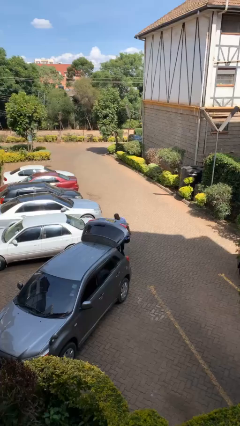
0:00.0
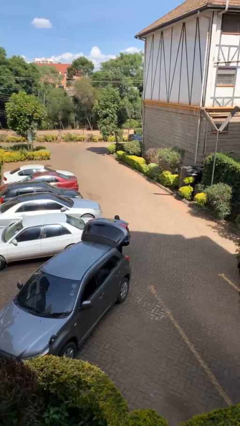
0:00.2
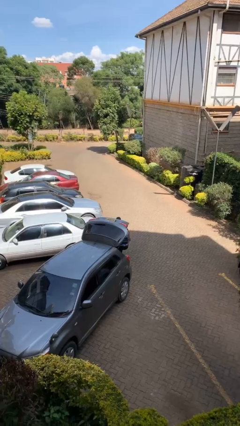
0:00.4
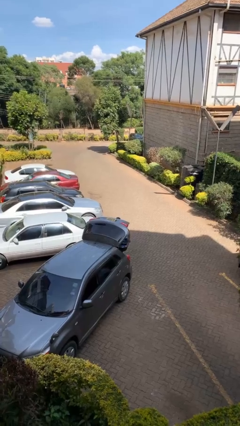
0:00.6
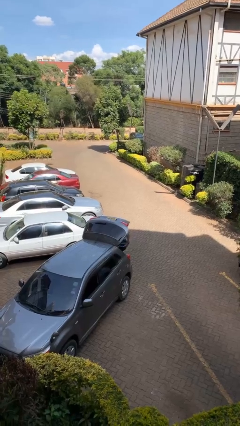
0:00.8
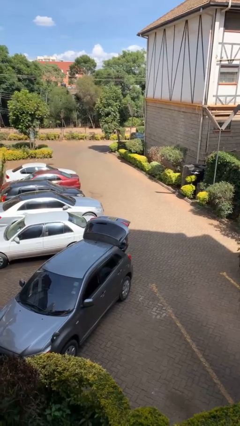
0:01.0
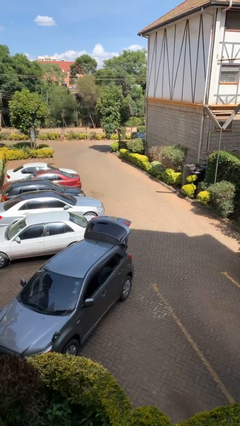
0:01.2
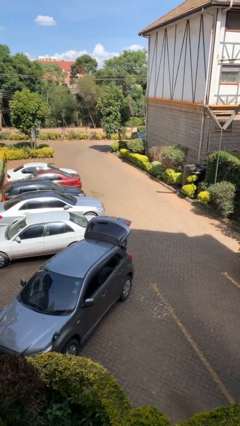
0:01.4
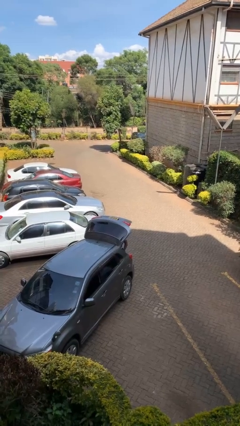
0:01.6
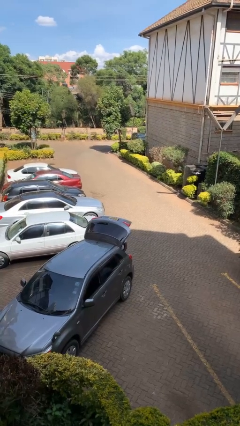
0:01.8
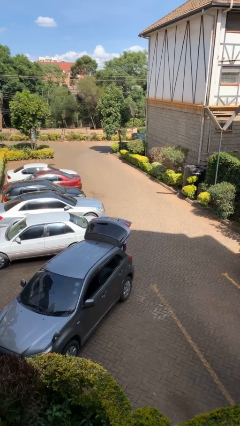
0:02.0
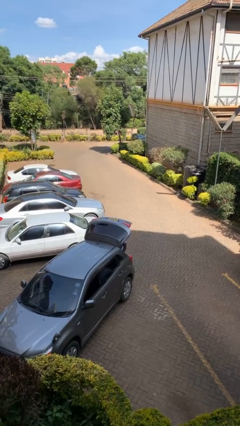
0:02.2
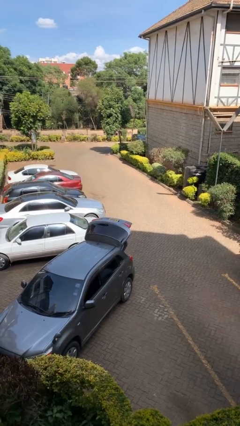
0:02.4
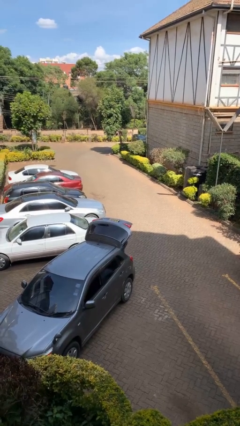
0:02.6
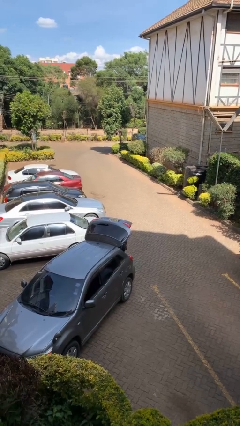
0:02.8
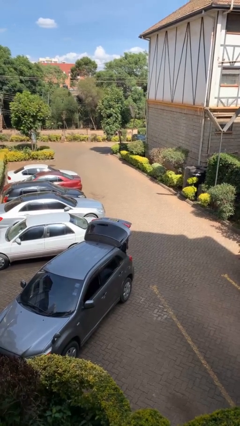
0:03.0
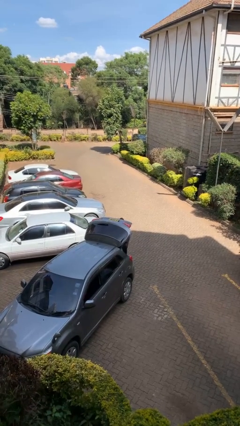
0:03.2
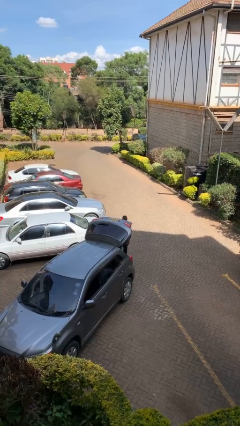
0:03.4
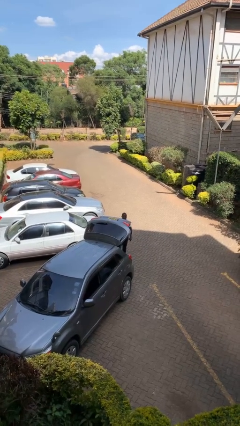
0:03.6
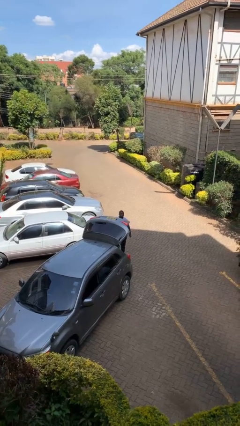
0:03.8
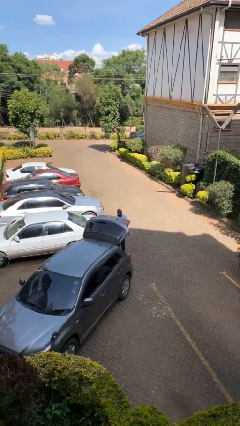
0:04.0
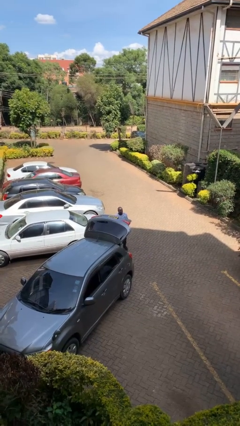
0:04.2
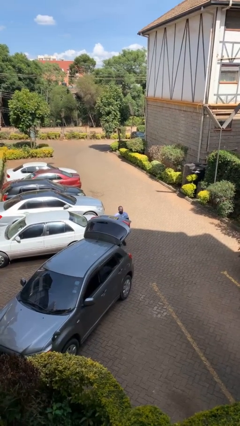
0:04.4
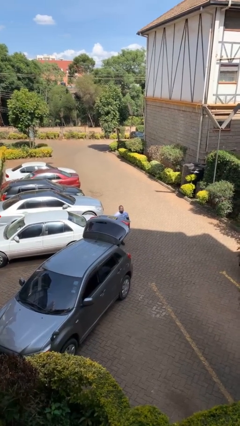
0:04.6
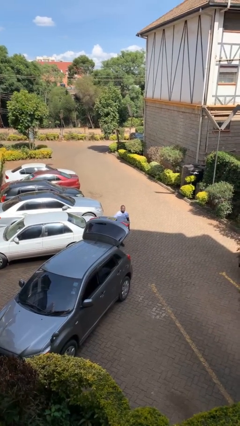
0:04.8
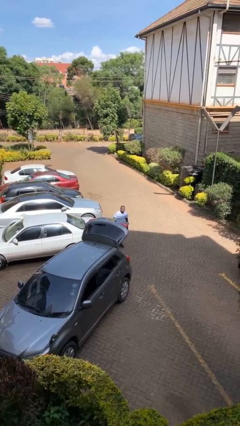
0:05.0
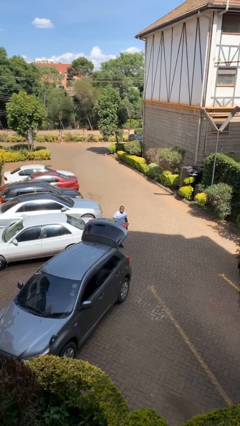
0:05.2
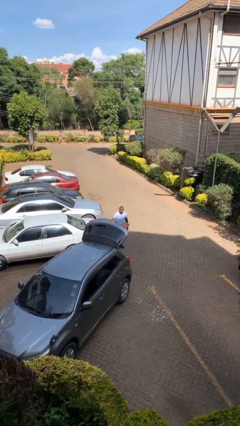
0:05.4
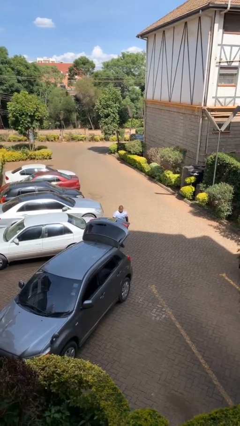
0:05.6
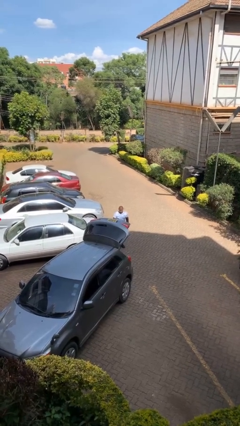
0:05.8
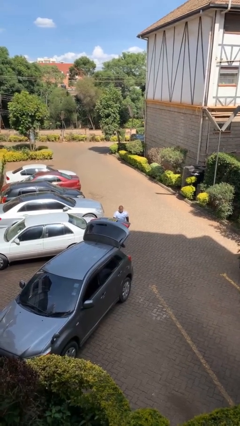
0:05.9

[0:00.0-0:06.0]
person loads car

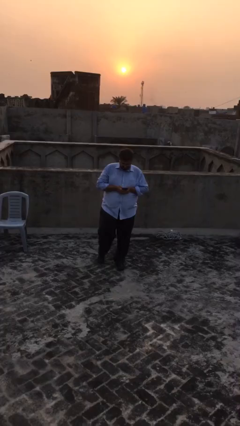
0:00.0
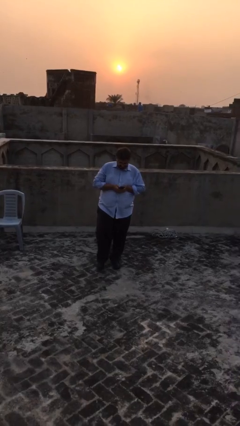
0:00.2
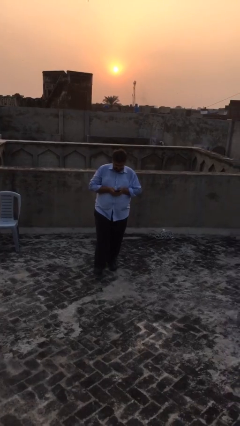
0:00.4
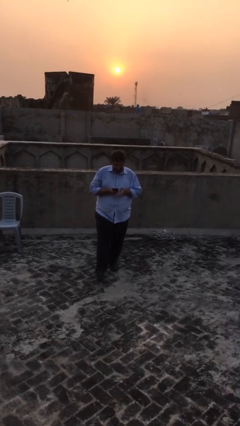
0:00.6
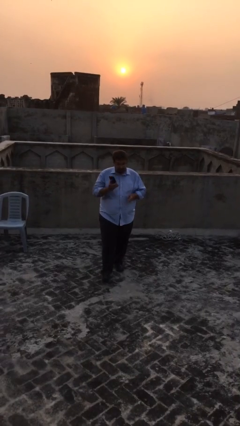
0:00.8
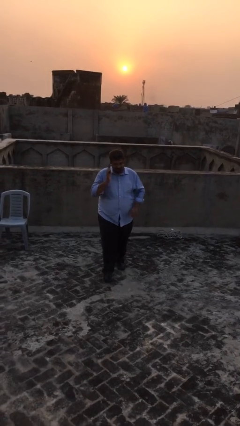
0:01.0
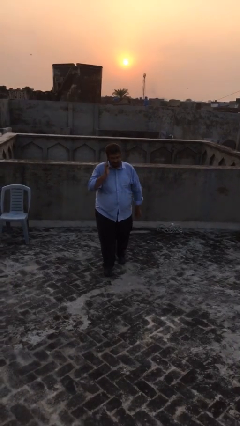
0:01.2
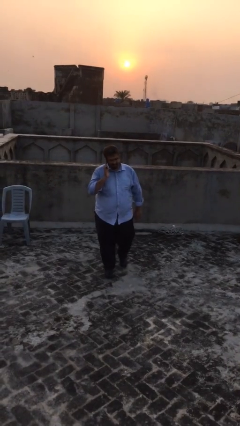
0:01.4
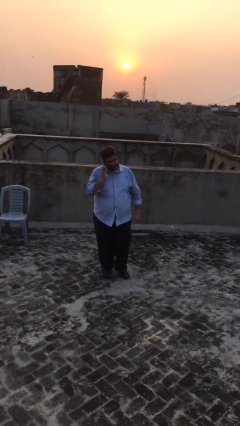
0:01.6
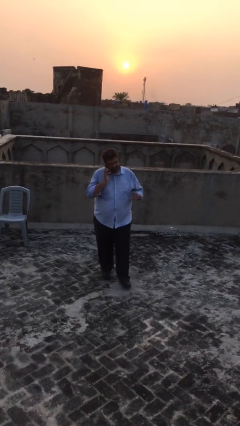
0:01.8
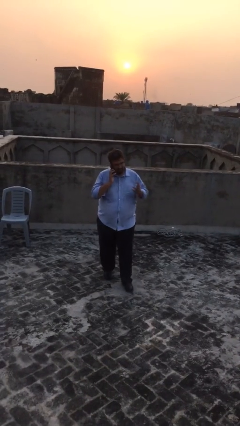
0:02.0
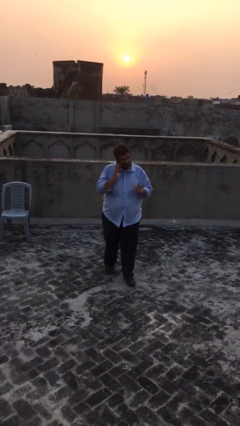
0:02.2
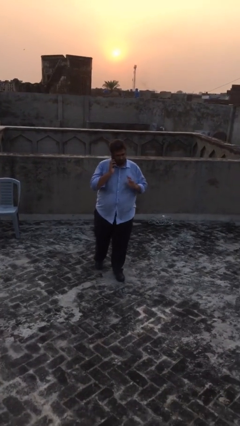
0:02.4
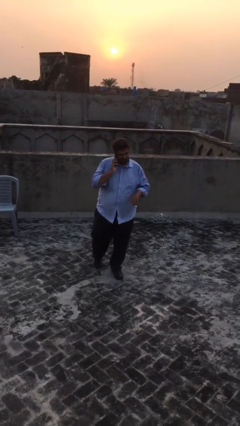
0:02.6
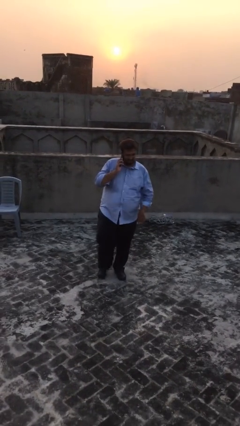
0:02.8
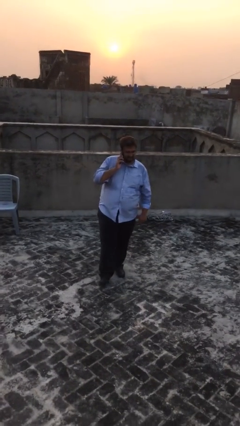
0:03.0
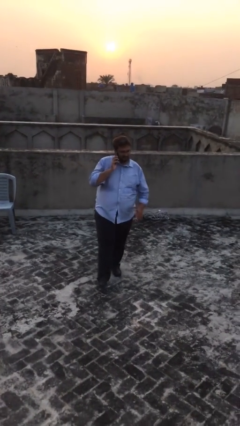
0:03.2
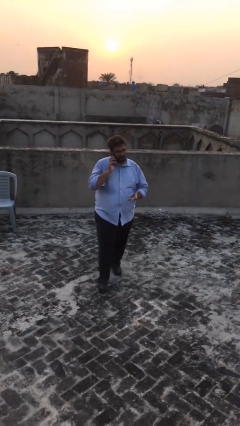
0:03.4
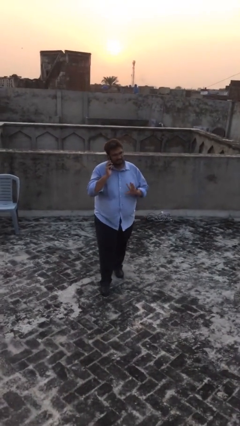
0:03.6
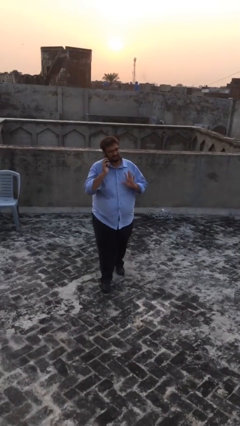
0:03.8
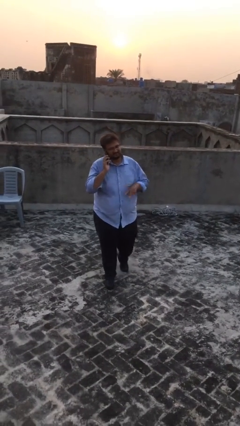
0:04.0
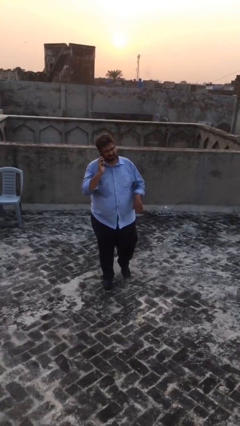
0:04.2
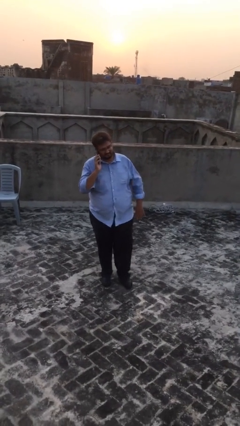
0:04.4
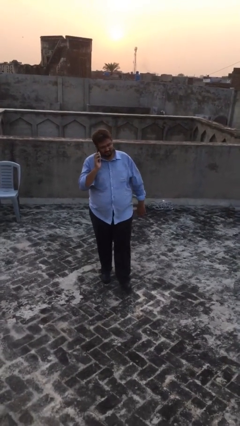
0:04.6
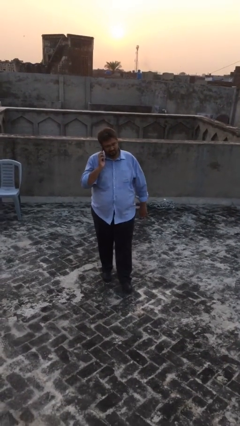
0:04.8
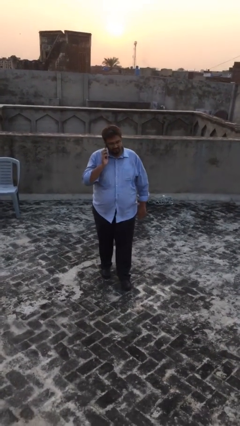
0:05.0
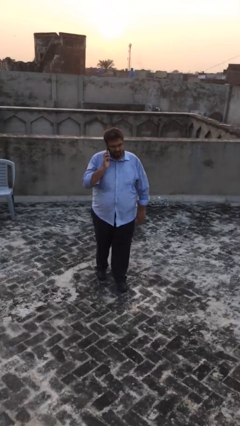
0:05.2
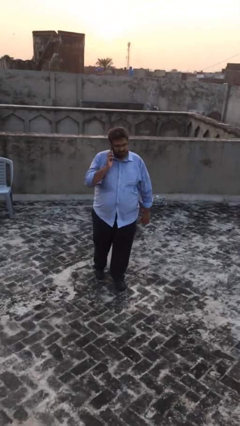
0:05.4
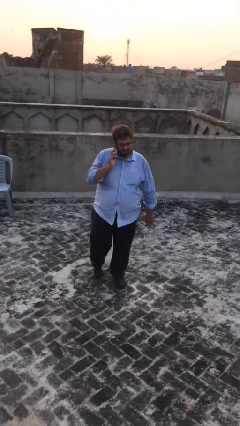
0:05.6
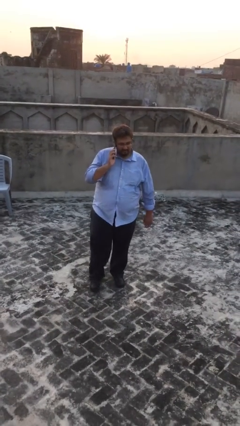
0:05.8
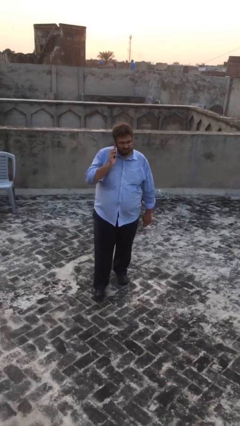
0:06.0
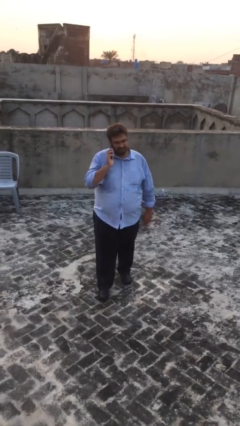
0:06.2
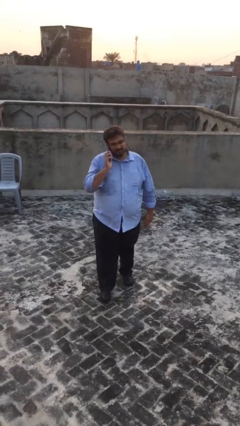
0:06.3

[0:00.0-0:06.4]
person talks on phone

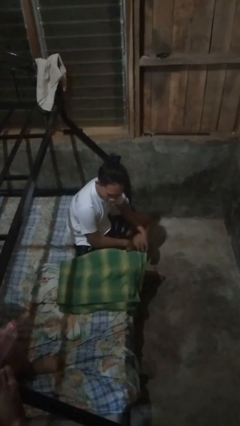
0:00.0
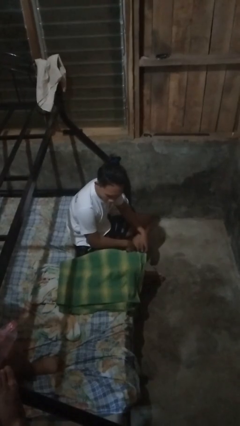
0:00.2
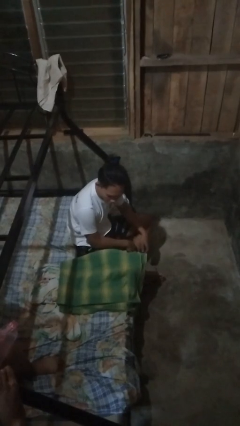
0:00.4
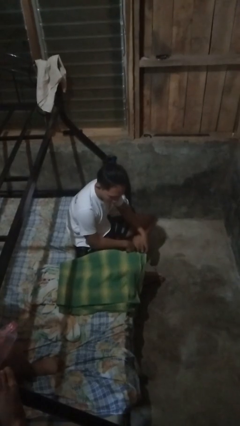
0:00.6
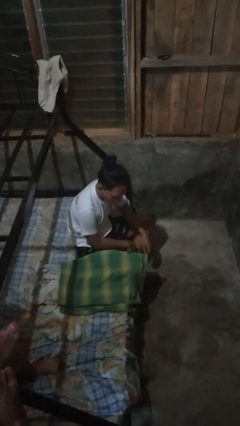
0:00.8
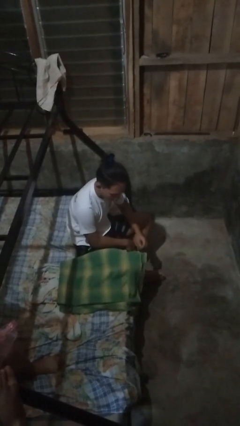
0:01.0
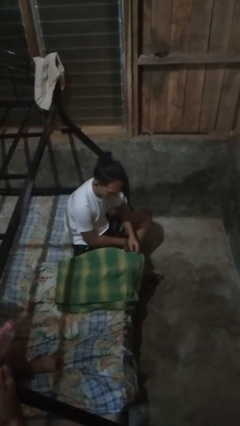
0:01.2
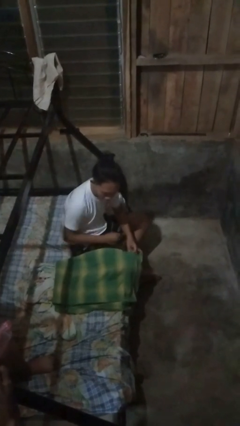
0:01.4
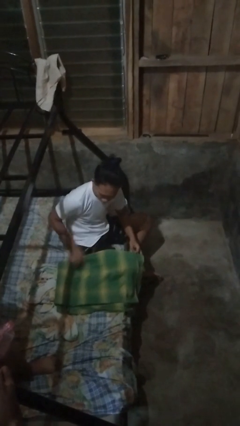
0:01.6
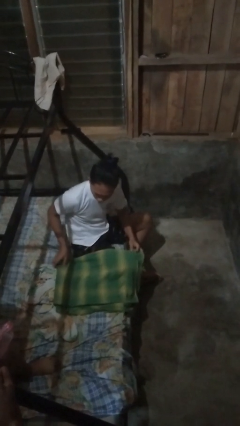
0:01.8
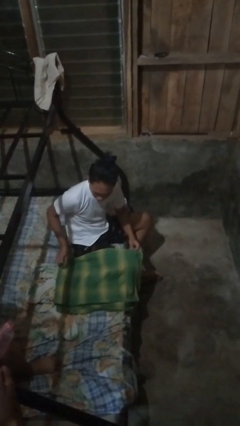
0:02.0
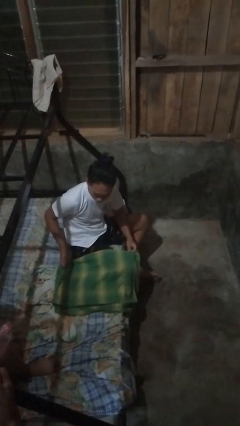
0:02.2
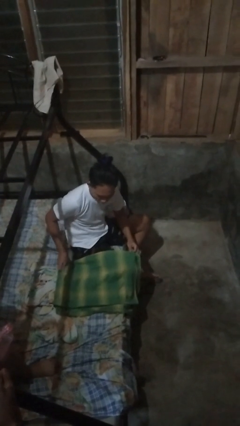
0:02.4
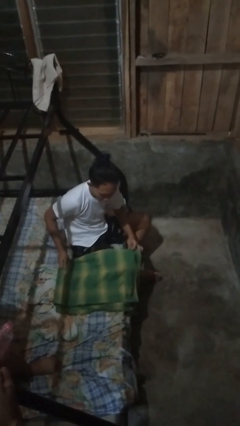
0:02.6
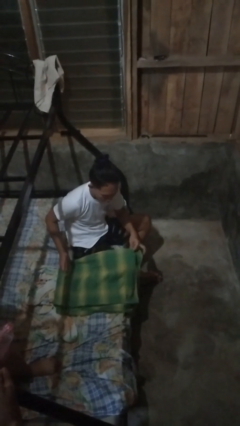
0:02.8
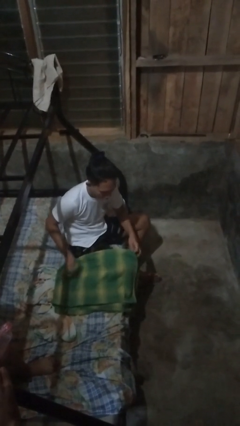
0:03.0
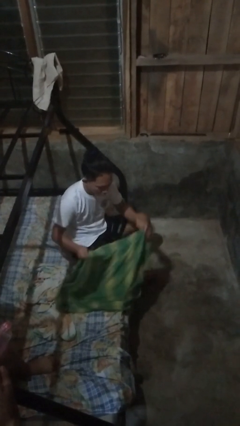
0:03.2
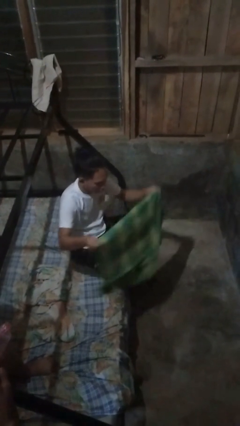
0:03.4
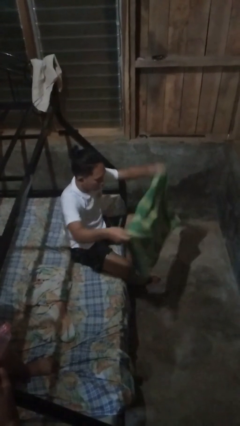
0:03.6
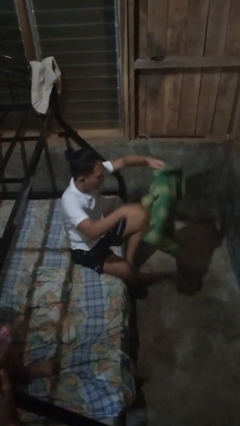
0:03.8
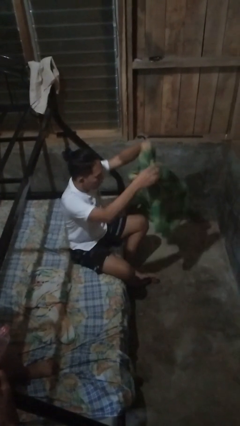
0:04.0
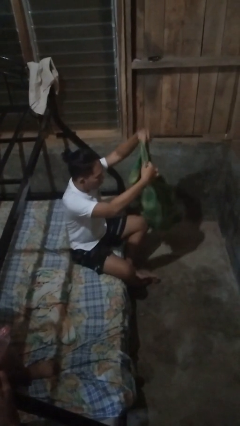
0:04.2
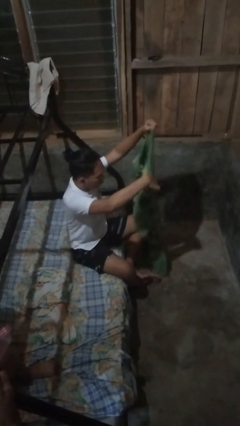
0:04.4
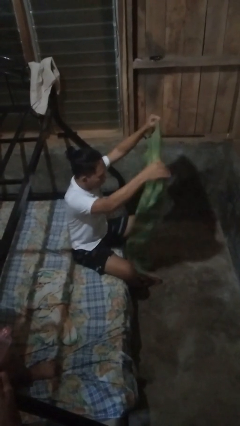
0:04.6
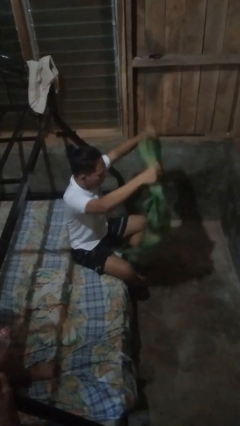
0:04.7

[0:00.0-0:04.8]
person unfolds blanket

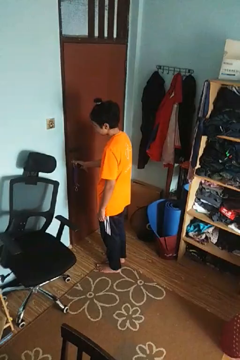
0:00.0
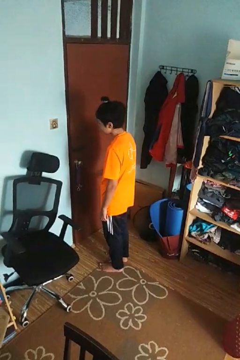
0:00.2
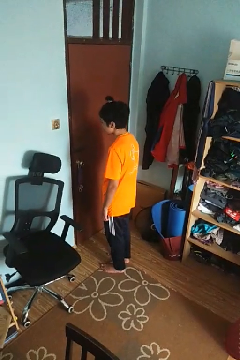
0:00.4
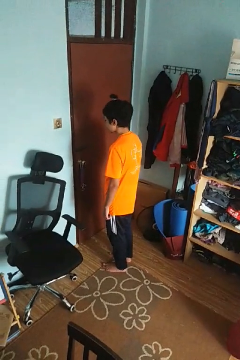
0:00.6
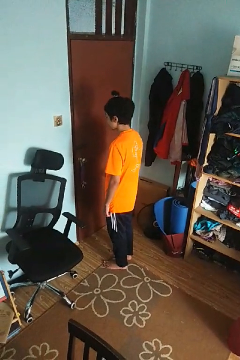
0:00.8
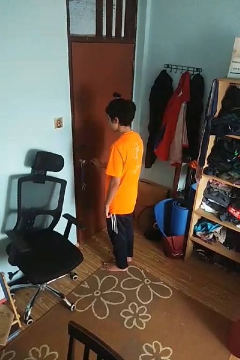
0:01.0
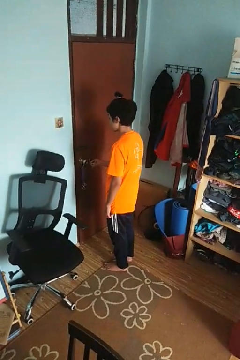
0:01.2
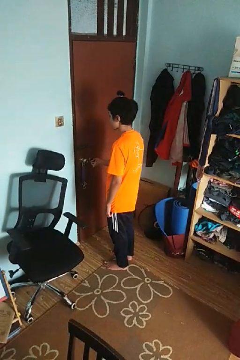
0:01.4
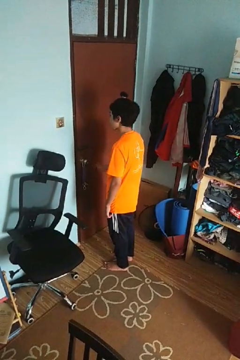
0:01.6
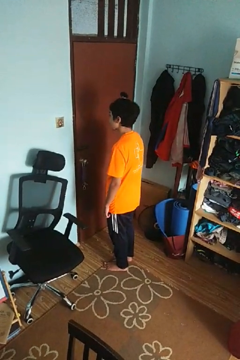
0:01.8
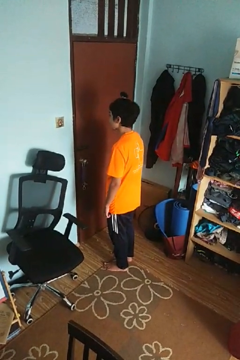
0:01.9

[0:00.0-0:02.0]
person locks door with keys
